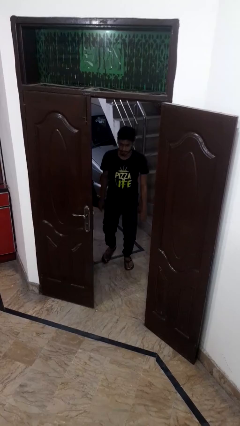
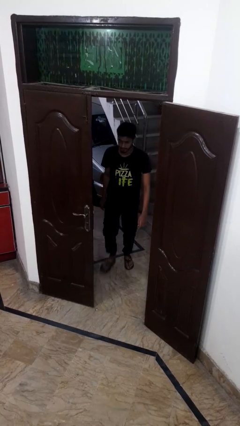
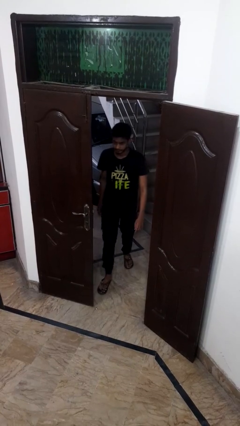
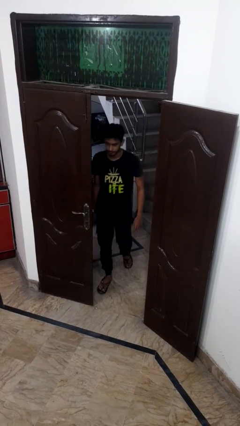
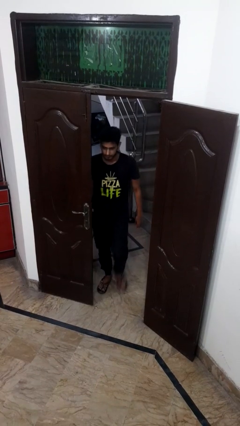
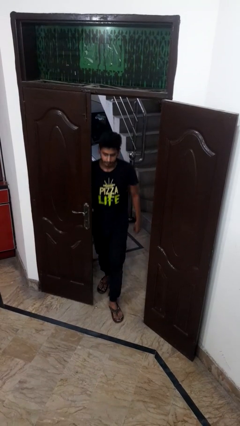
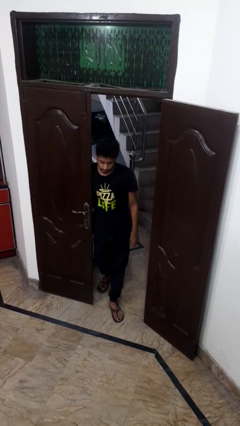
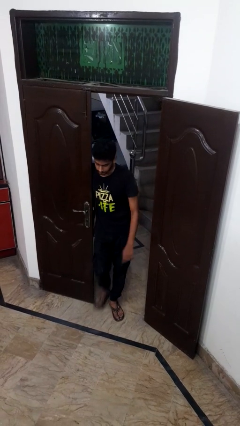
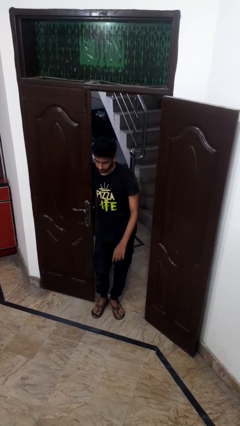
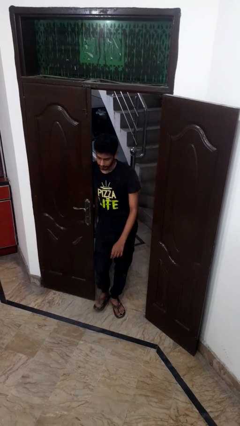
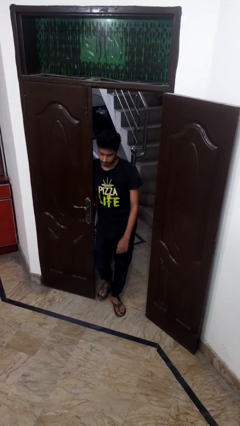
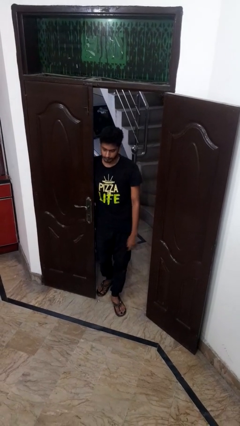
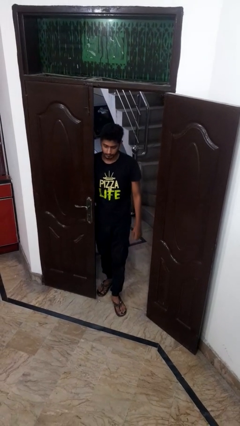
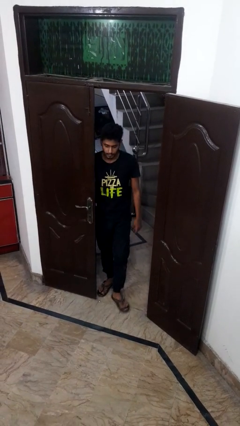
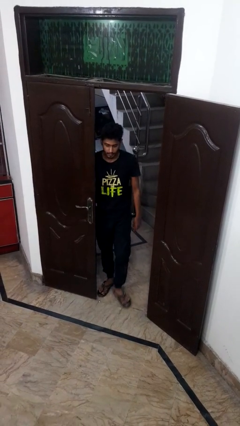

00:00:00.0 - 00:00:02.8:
person bumps into wall

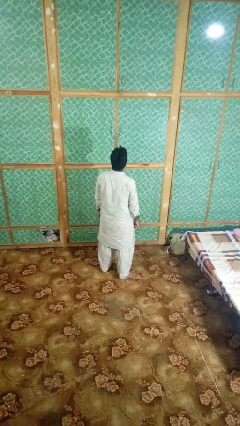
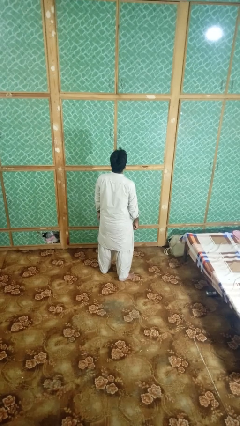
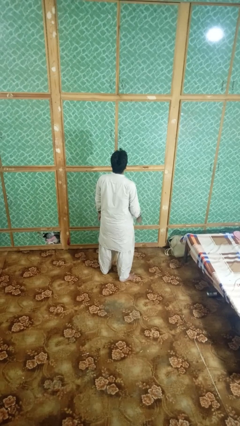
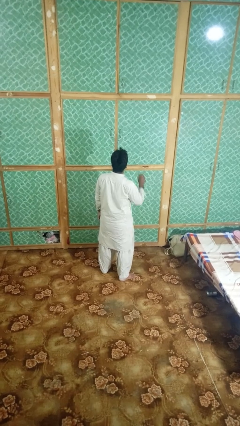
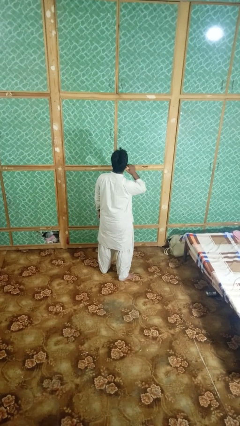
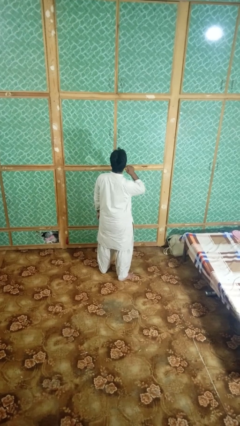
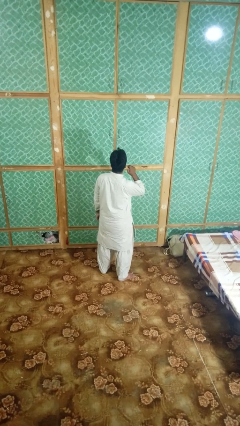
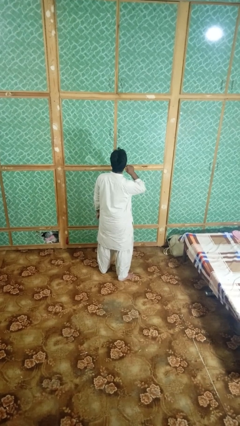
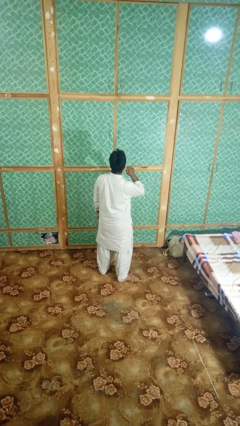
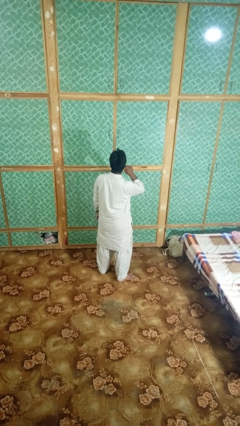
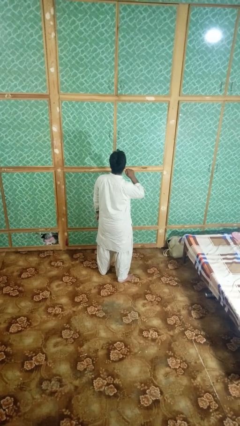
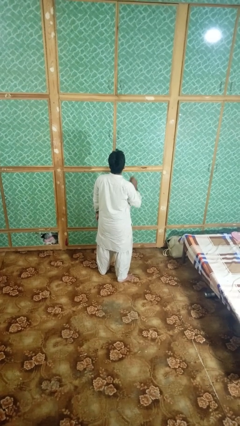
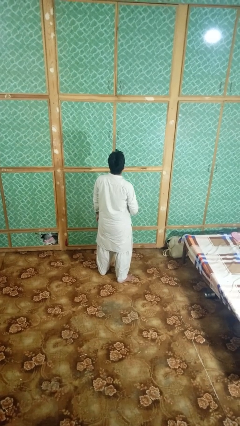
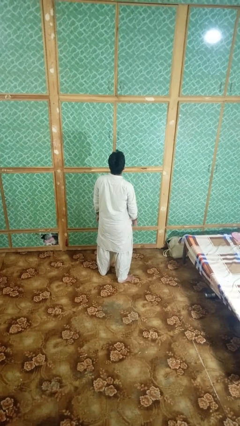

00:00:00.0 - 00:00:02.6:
person touches earlobe

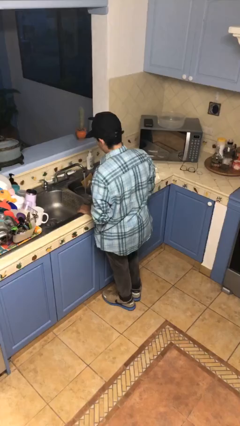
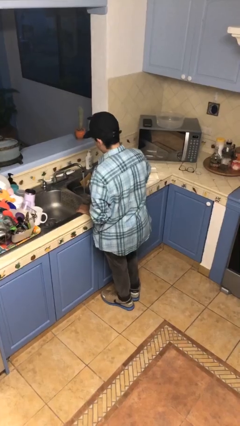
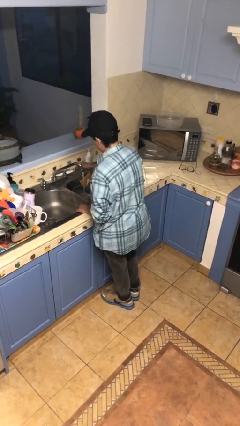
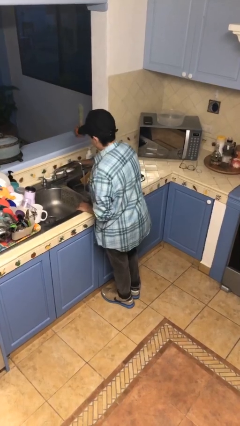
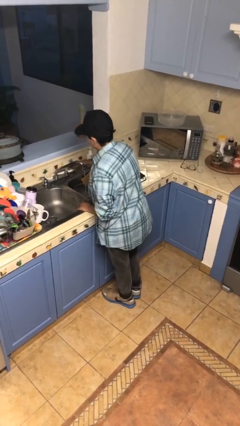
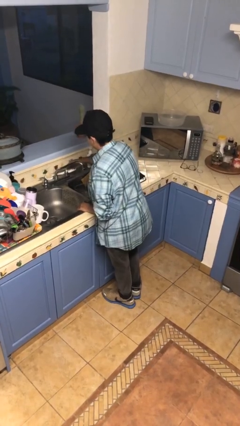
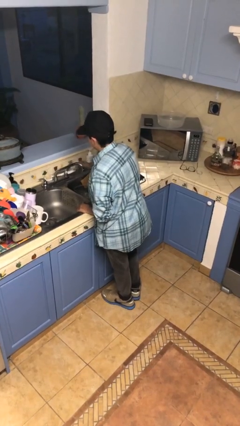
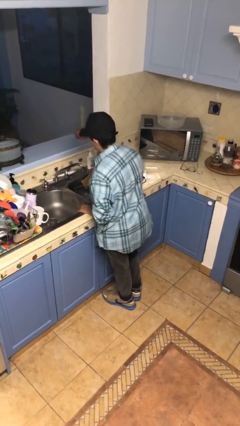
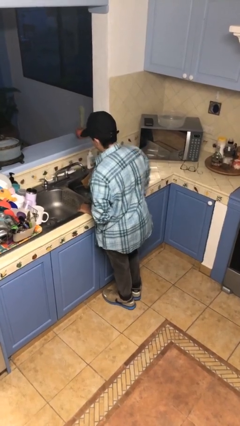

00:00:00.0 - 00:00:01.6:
person turns off faucet

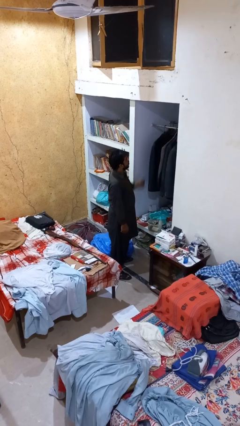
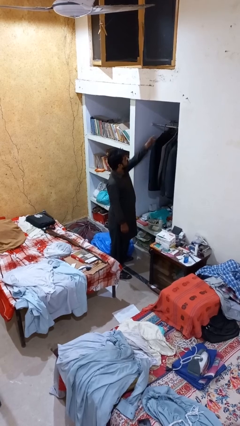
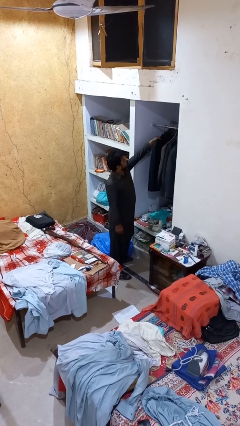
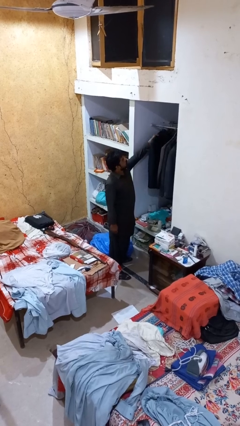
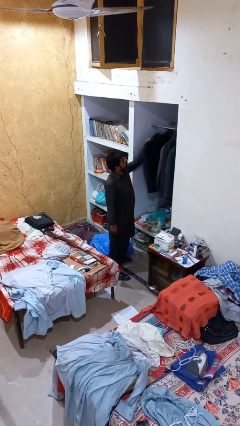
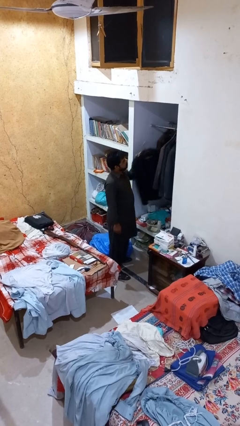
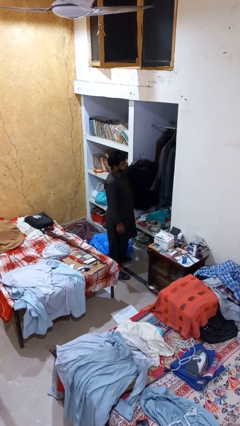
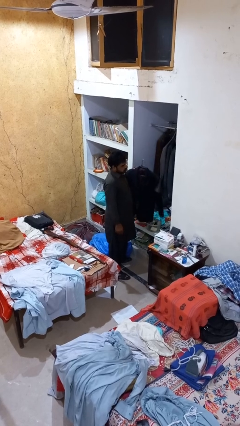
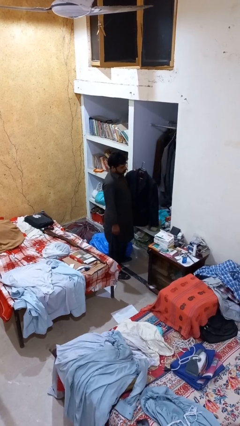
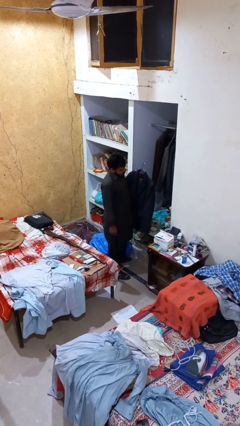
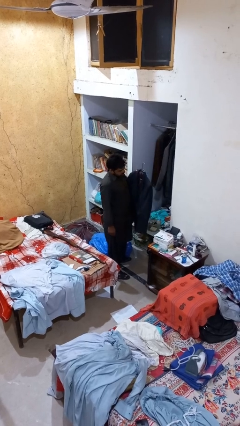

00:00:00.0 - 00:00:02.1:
person takes clothes from closet

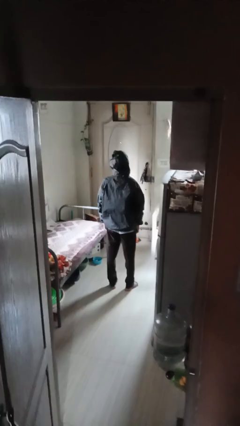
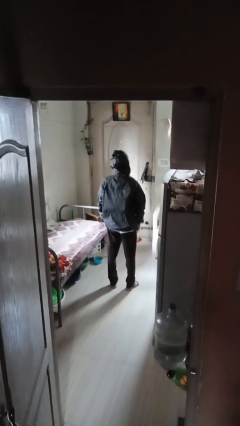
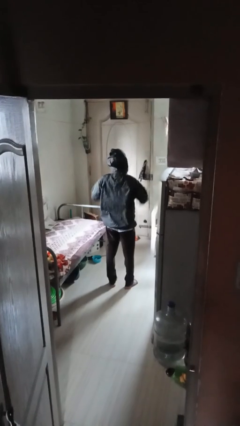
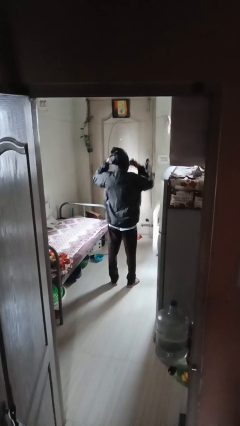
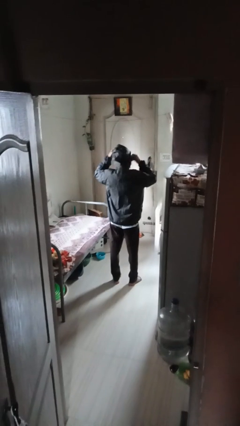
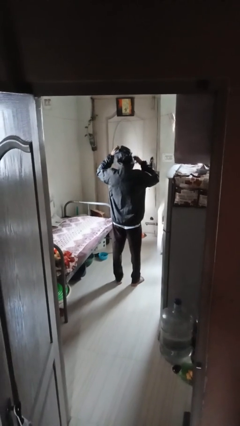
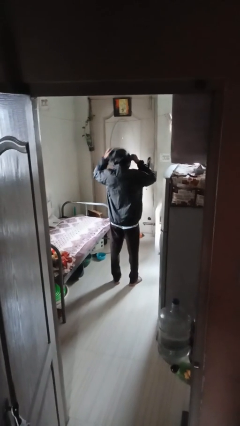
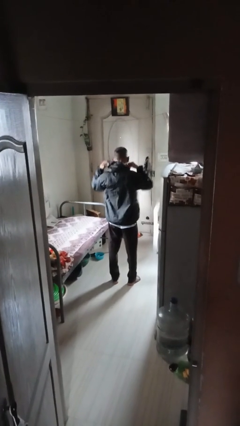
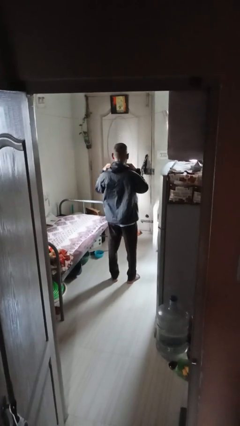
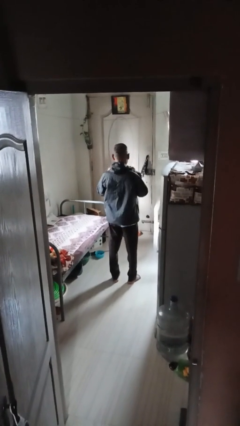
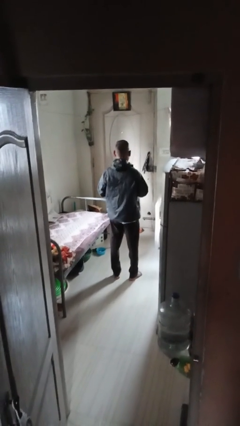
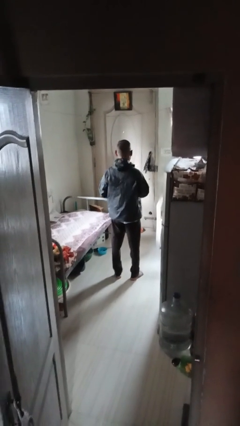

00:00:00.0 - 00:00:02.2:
person takes off hoodie

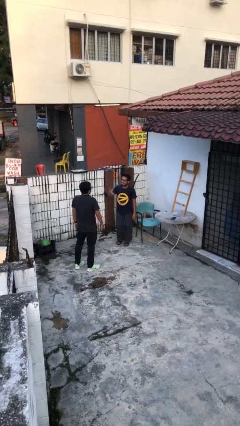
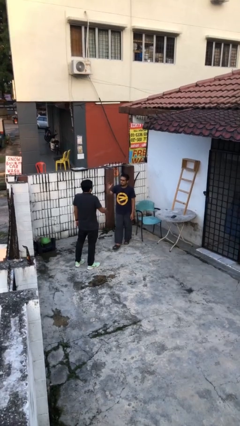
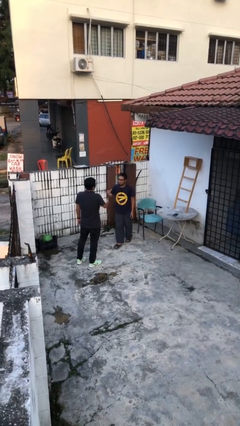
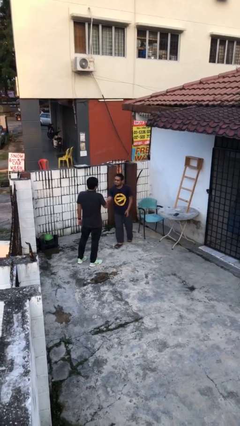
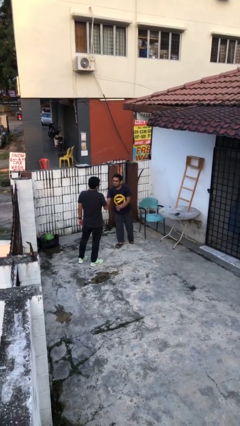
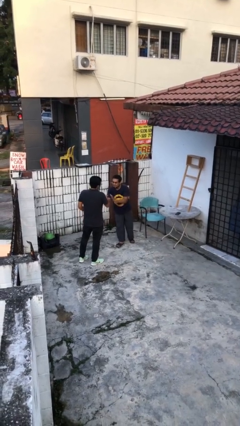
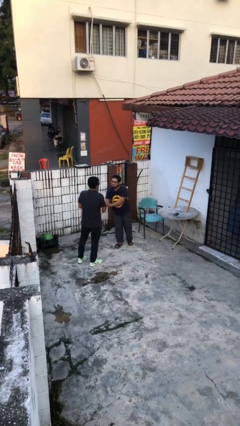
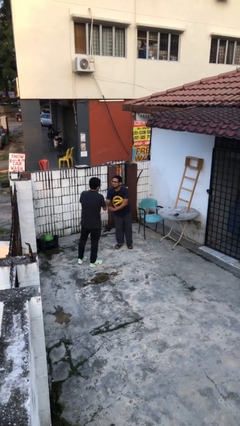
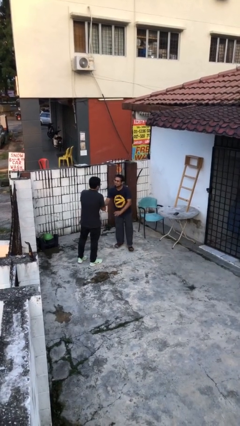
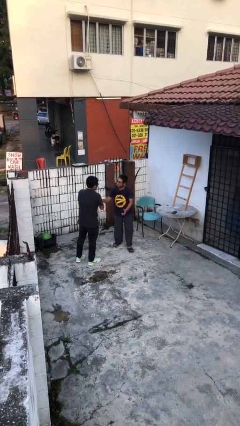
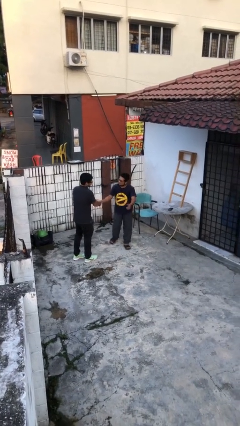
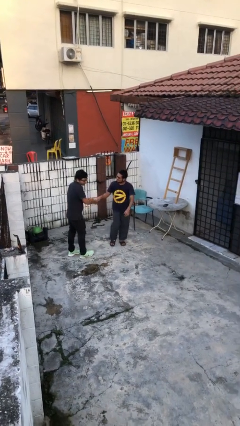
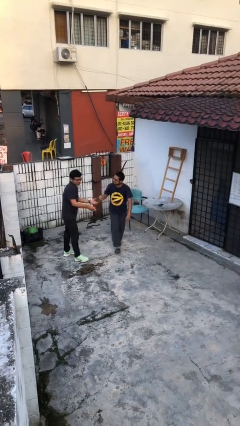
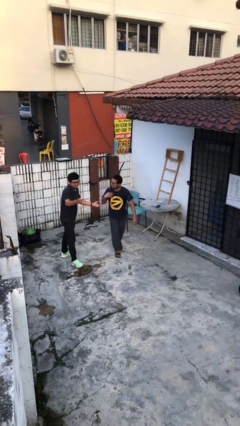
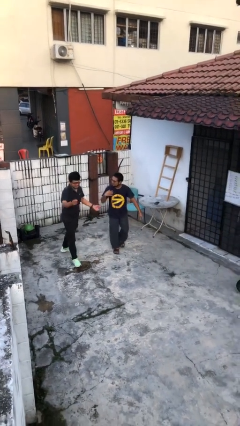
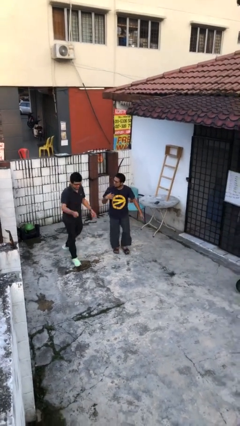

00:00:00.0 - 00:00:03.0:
person shakes hand

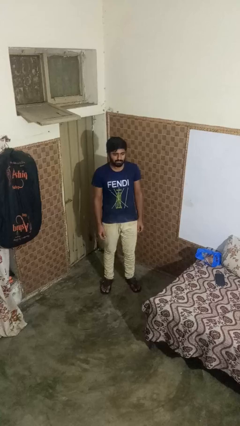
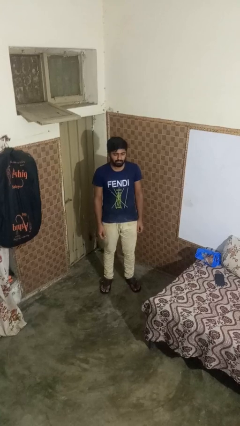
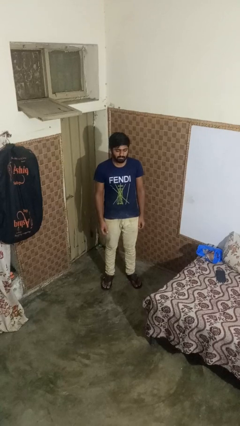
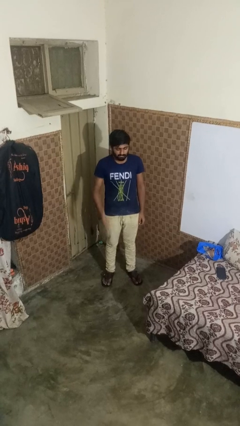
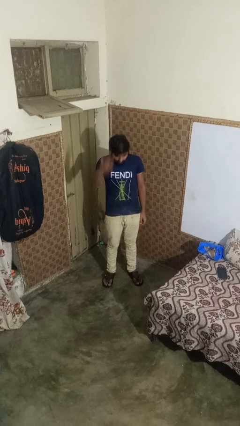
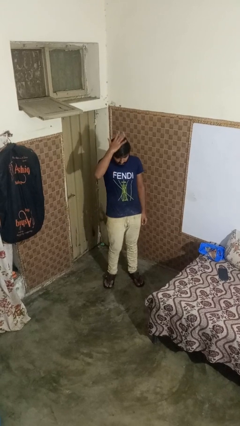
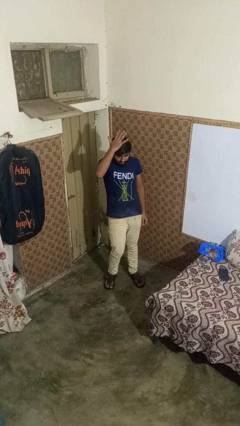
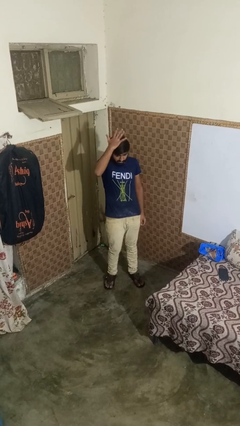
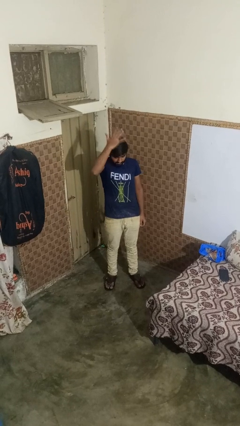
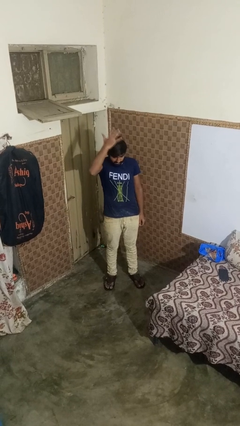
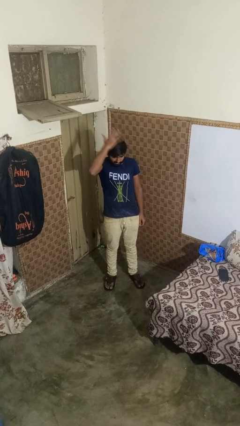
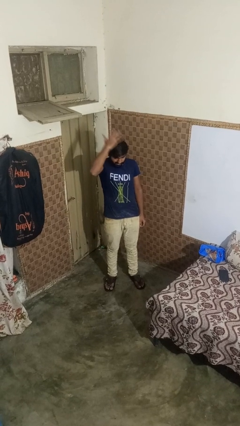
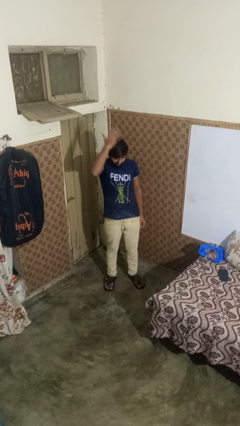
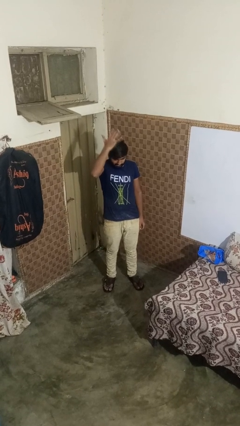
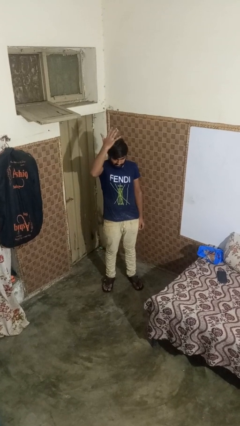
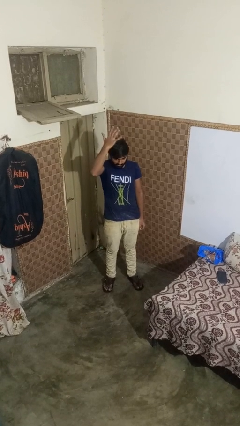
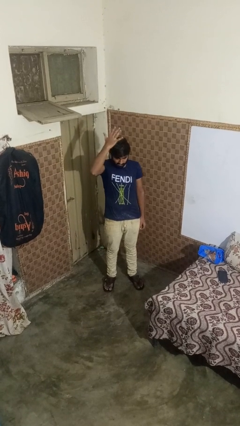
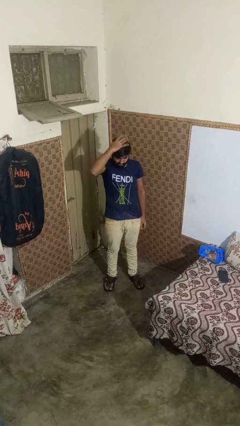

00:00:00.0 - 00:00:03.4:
person pats head
